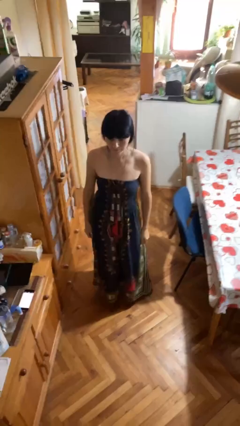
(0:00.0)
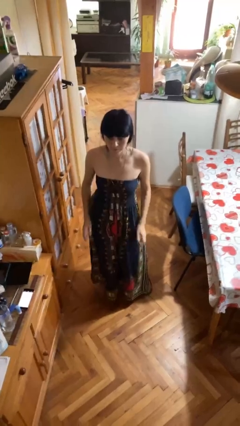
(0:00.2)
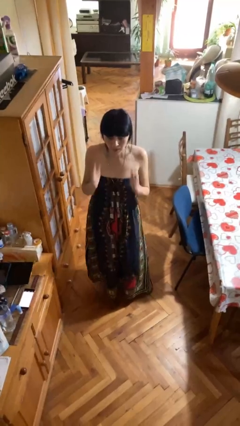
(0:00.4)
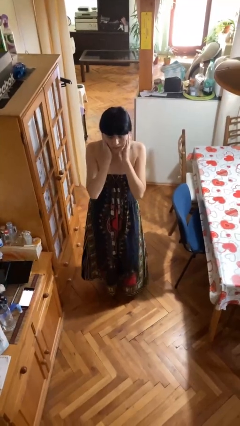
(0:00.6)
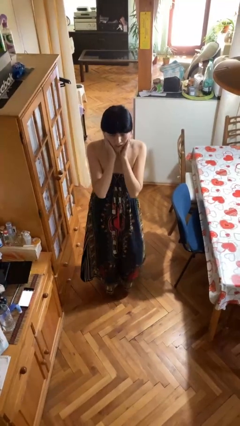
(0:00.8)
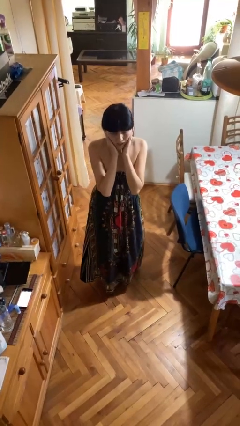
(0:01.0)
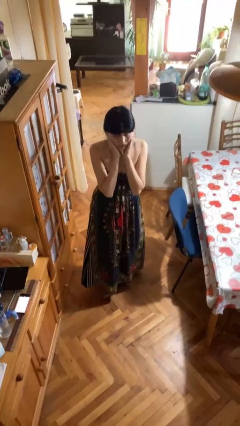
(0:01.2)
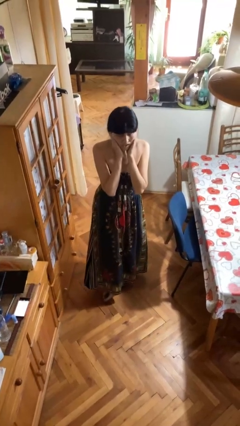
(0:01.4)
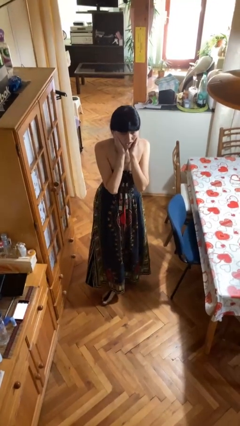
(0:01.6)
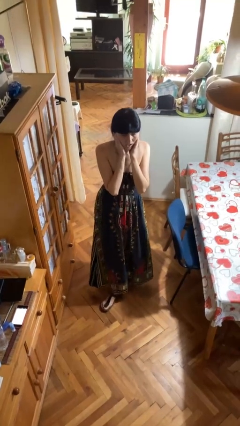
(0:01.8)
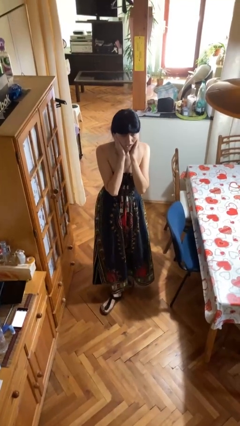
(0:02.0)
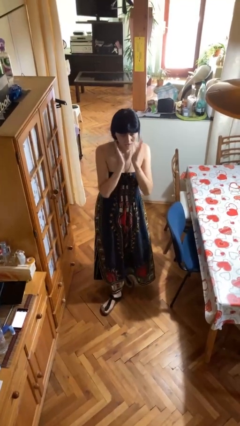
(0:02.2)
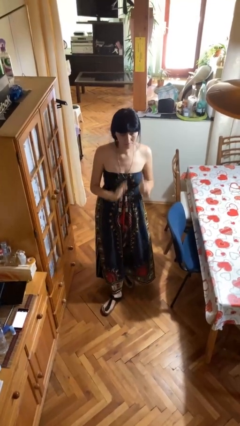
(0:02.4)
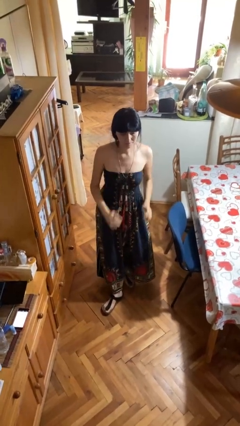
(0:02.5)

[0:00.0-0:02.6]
person puts fingers in ear

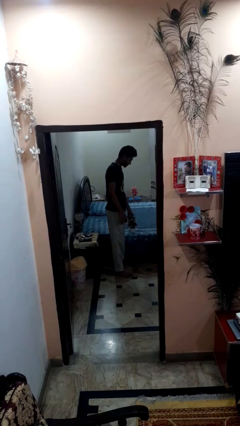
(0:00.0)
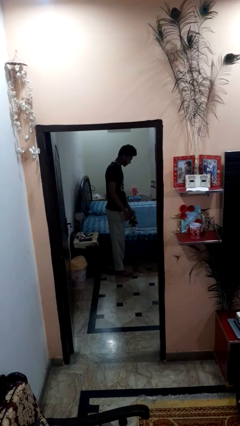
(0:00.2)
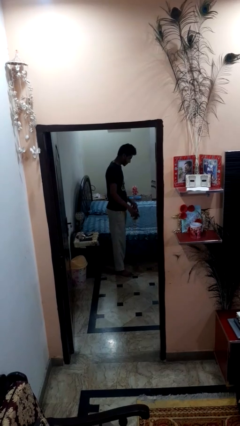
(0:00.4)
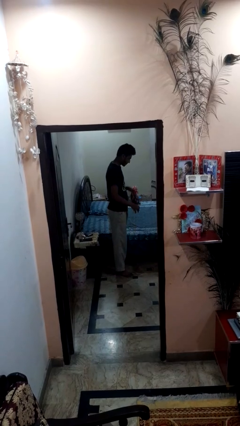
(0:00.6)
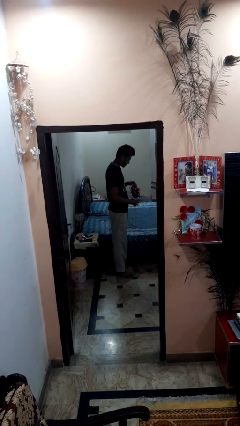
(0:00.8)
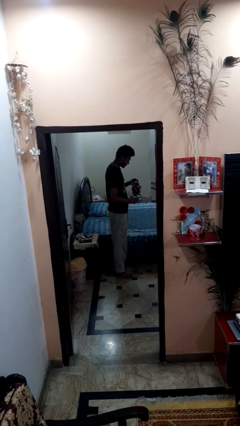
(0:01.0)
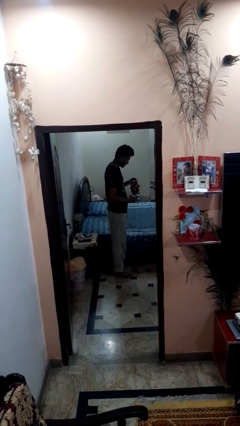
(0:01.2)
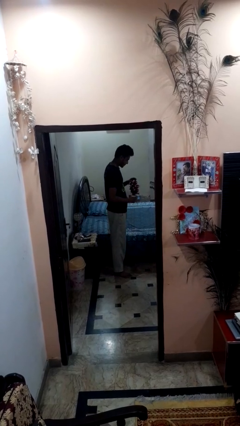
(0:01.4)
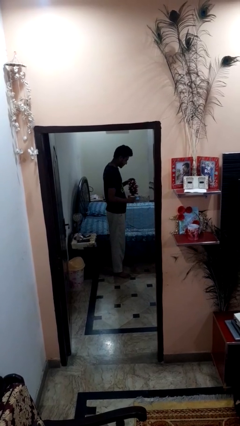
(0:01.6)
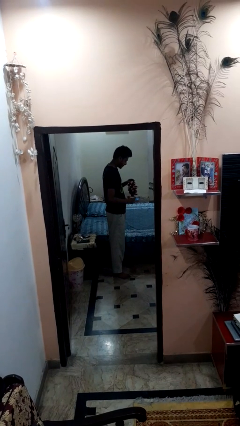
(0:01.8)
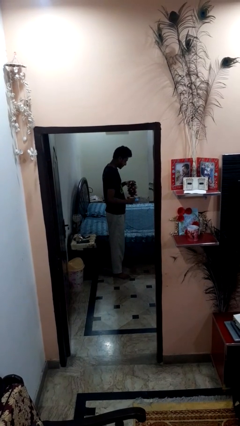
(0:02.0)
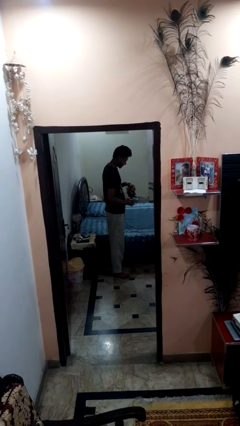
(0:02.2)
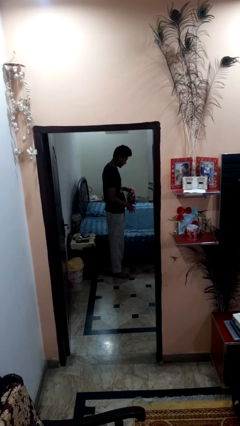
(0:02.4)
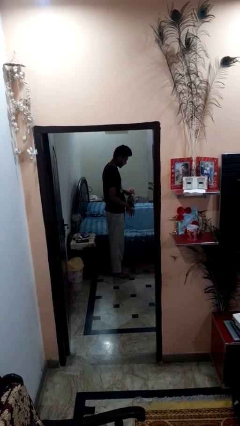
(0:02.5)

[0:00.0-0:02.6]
person picks up object from bed

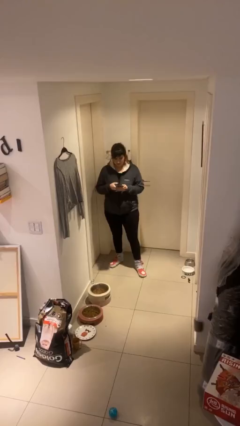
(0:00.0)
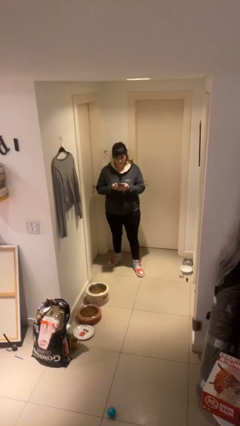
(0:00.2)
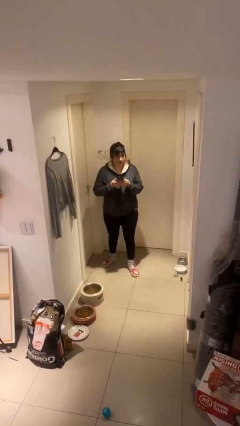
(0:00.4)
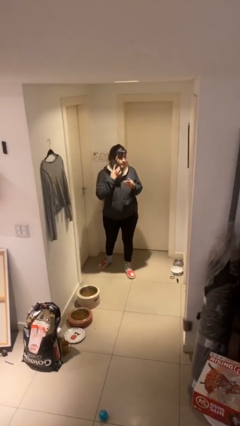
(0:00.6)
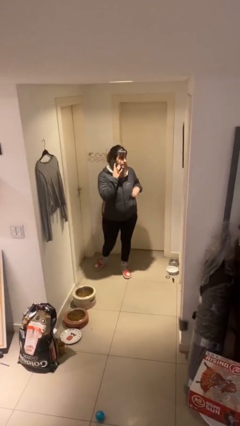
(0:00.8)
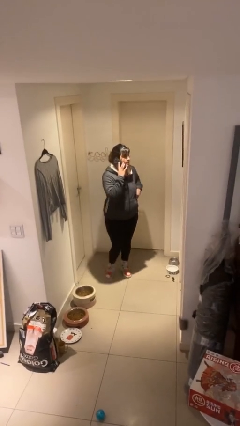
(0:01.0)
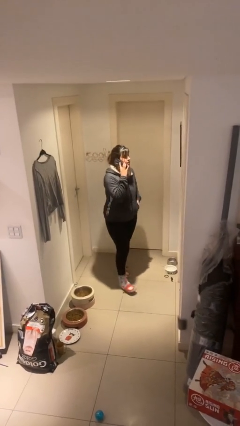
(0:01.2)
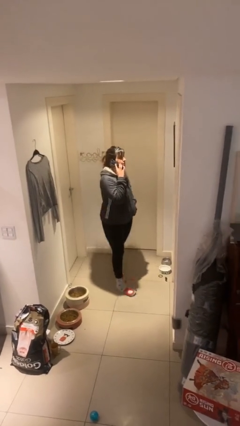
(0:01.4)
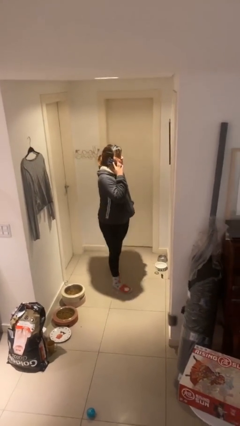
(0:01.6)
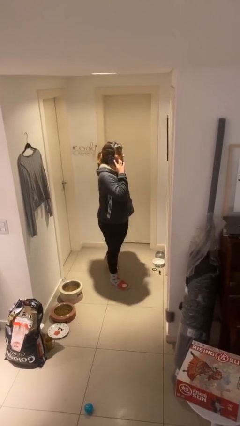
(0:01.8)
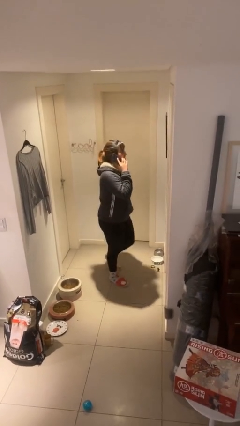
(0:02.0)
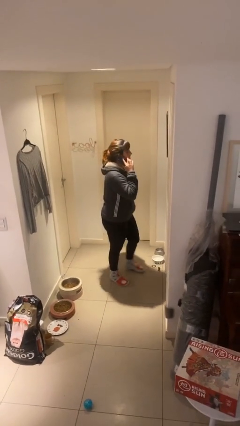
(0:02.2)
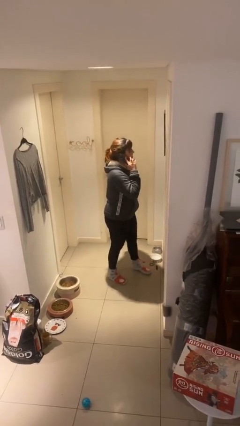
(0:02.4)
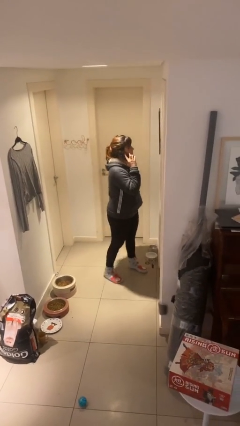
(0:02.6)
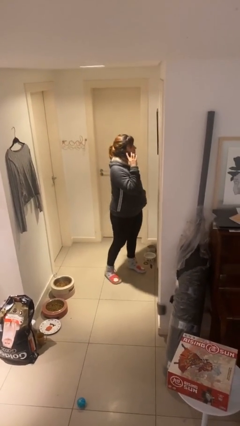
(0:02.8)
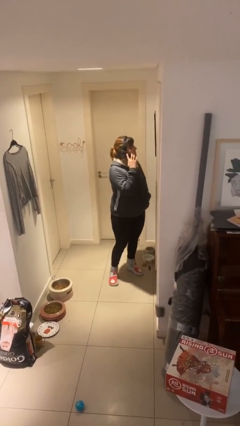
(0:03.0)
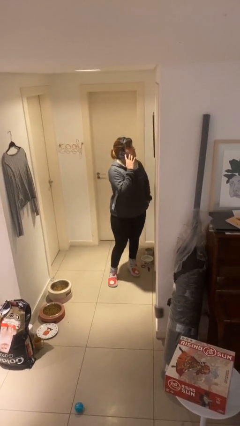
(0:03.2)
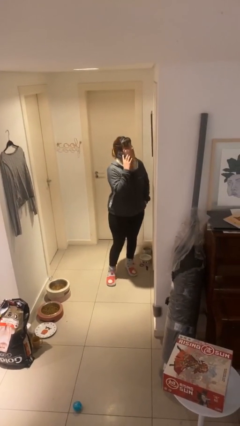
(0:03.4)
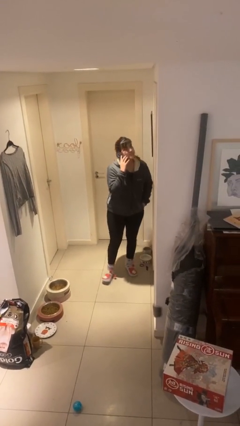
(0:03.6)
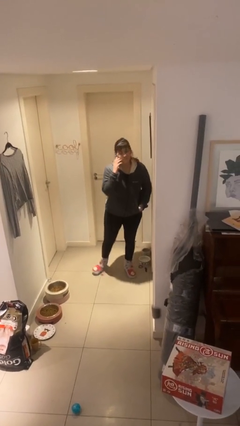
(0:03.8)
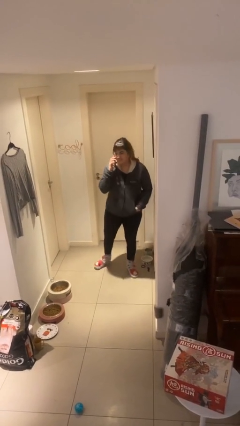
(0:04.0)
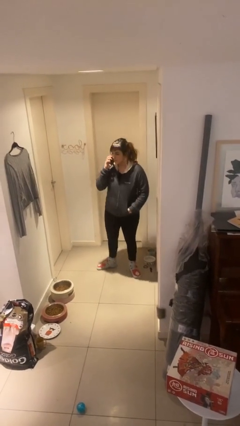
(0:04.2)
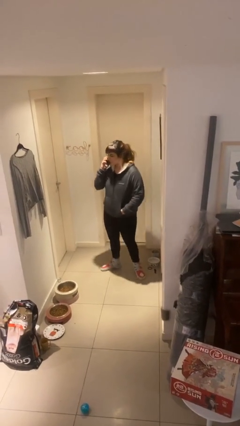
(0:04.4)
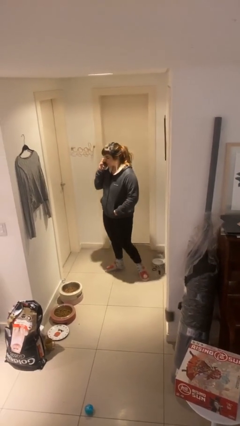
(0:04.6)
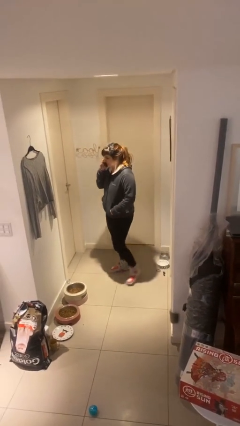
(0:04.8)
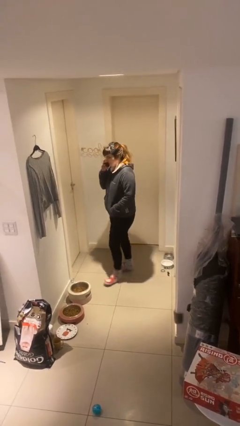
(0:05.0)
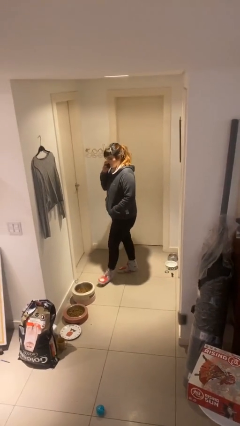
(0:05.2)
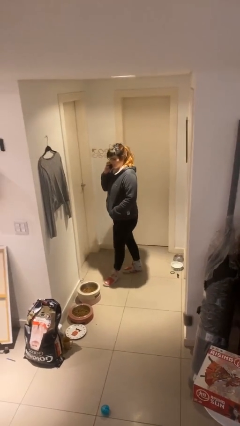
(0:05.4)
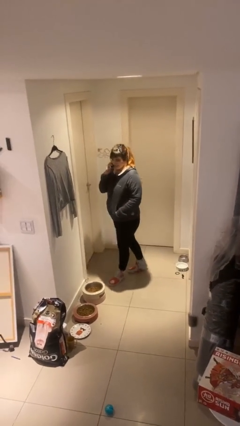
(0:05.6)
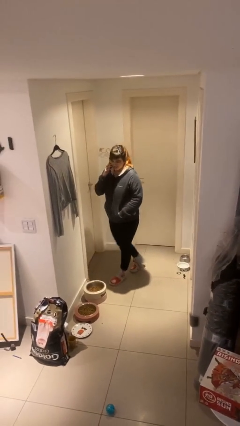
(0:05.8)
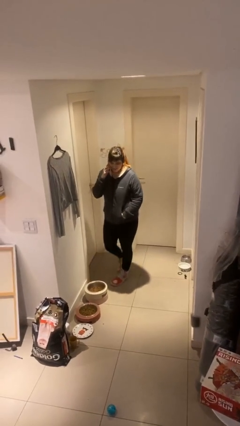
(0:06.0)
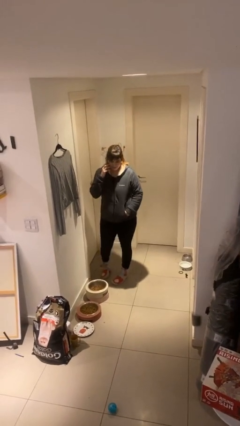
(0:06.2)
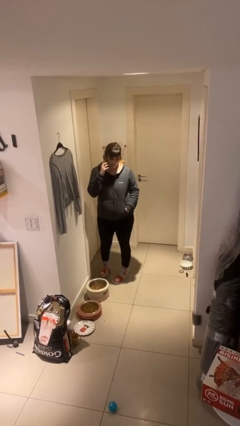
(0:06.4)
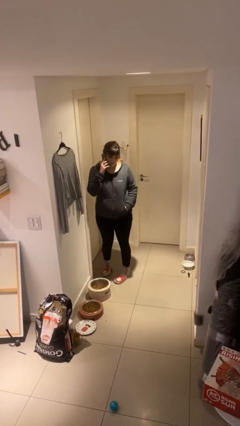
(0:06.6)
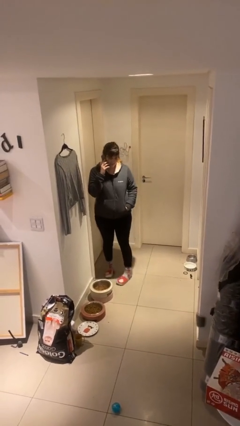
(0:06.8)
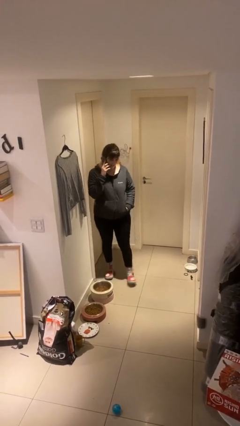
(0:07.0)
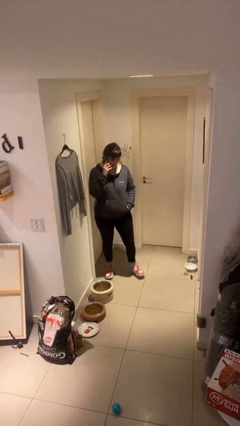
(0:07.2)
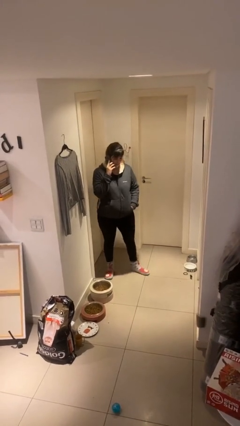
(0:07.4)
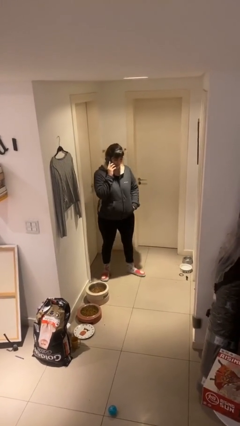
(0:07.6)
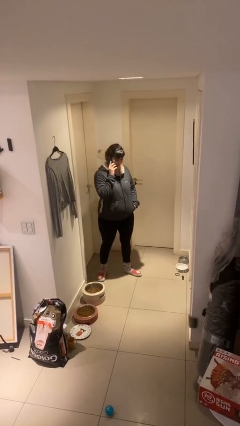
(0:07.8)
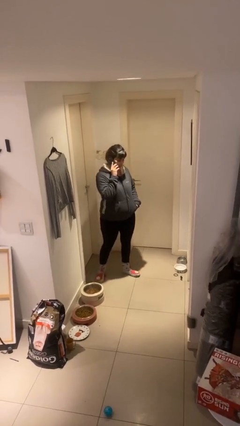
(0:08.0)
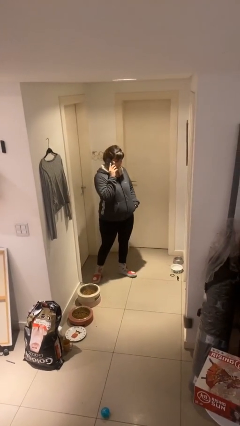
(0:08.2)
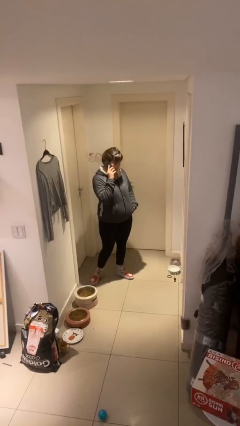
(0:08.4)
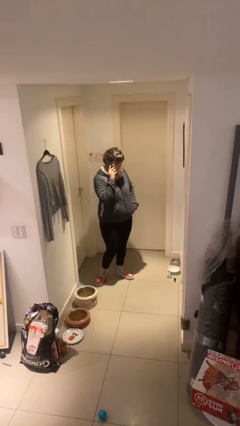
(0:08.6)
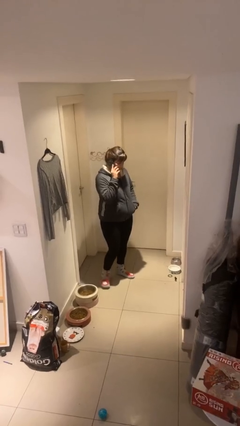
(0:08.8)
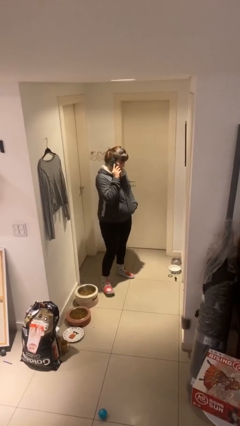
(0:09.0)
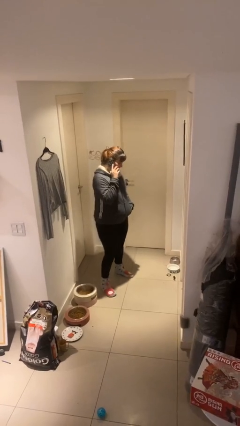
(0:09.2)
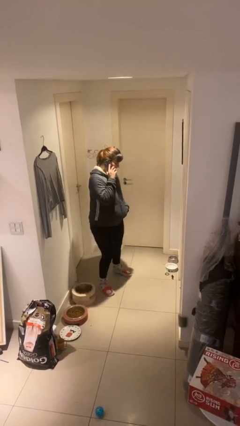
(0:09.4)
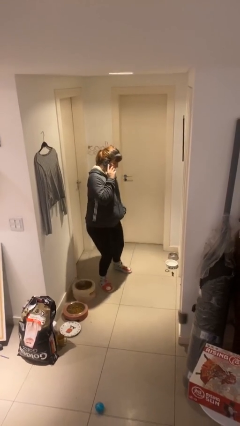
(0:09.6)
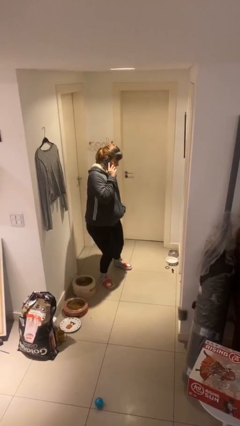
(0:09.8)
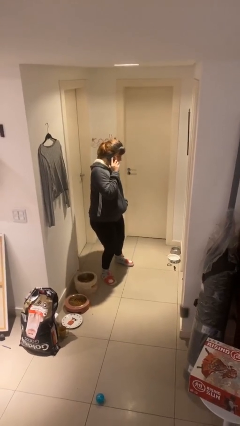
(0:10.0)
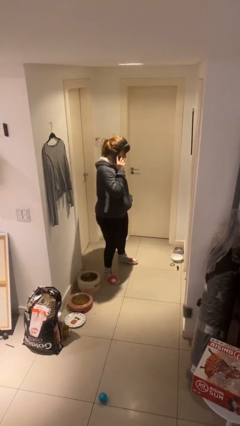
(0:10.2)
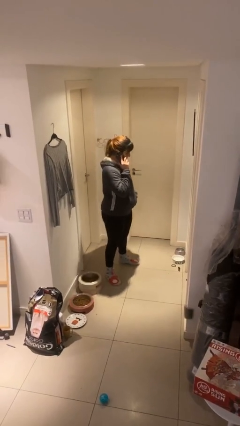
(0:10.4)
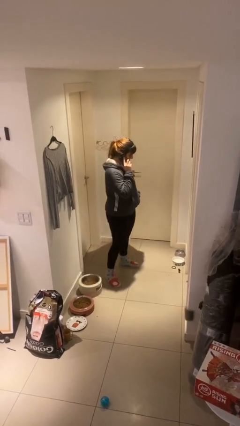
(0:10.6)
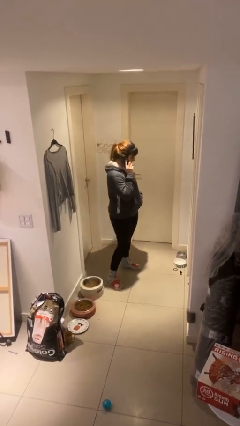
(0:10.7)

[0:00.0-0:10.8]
person talks on phone

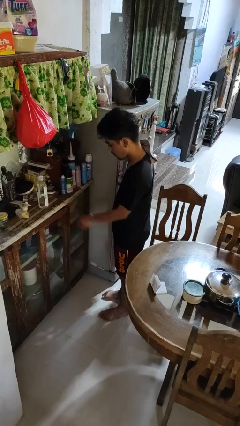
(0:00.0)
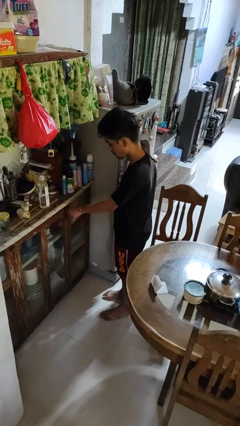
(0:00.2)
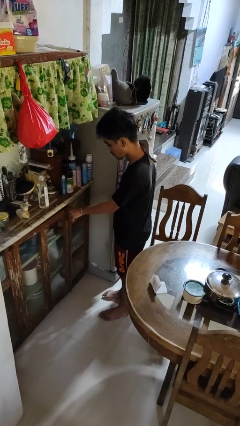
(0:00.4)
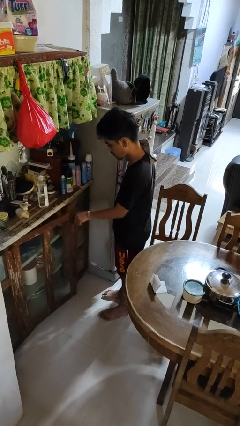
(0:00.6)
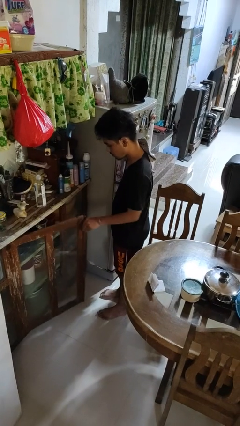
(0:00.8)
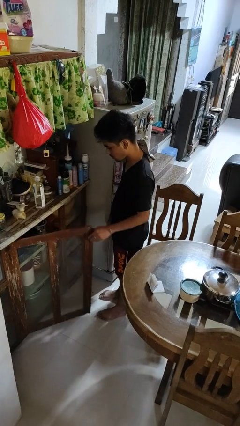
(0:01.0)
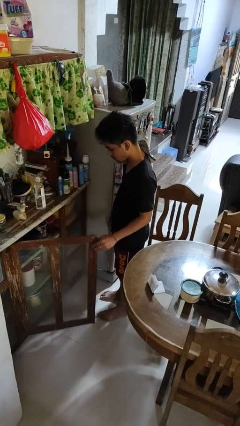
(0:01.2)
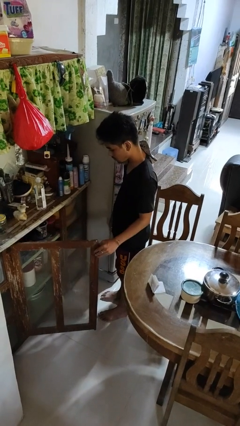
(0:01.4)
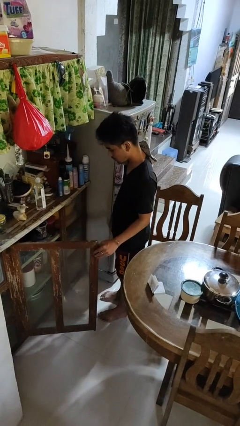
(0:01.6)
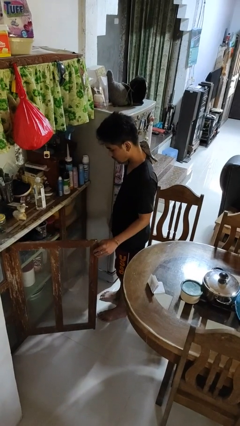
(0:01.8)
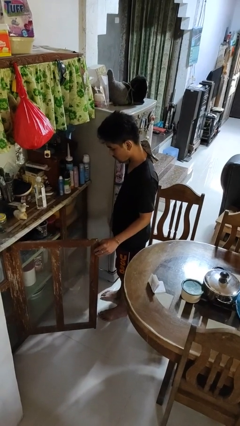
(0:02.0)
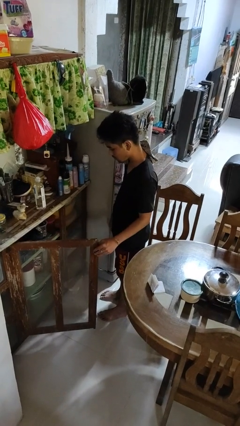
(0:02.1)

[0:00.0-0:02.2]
person opens cabinet
